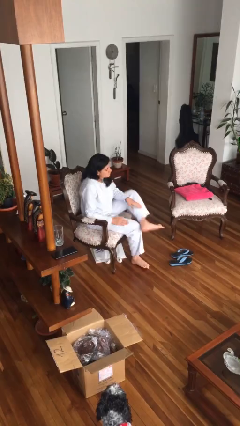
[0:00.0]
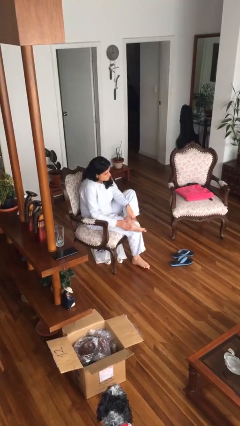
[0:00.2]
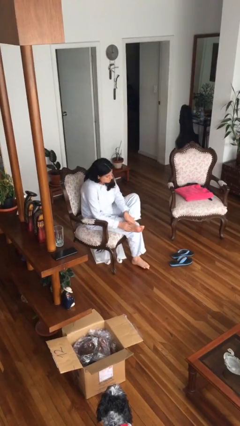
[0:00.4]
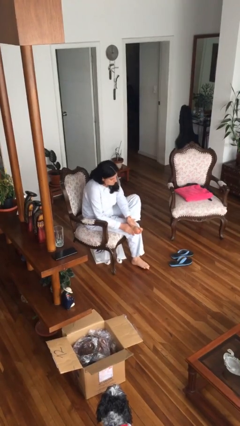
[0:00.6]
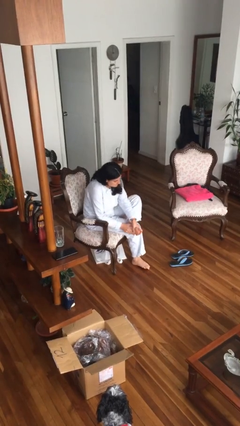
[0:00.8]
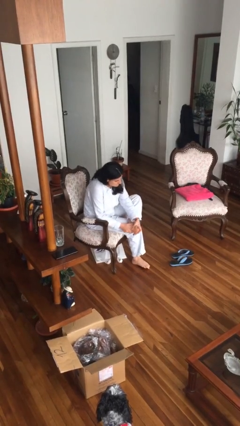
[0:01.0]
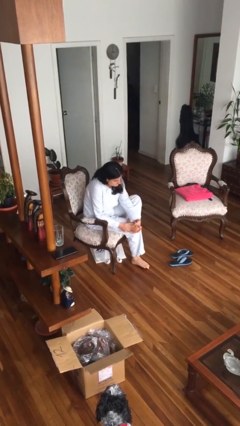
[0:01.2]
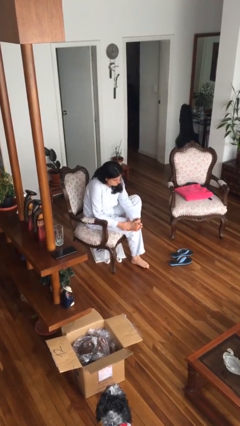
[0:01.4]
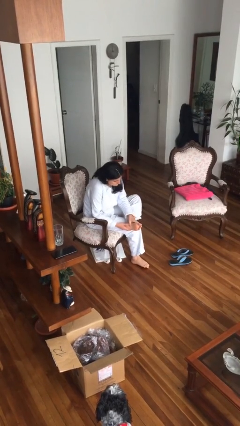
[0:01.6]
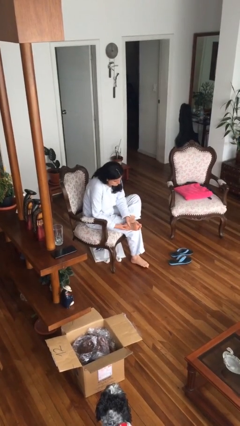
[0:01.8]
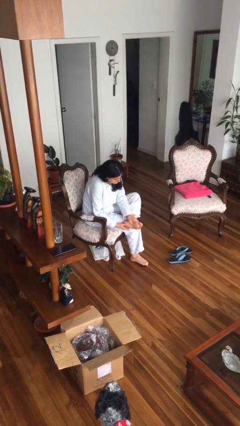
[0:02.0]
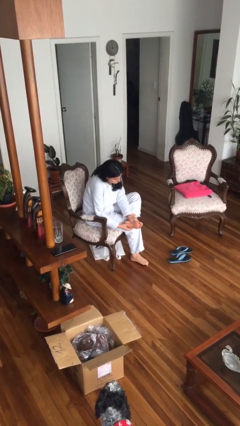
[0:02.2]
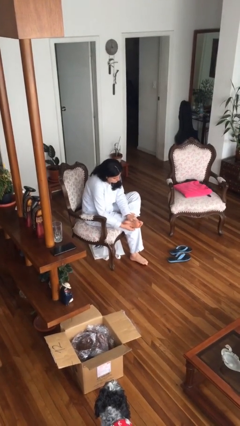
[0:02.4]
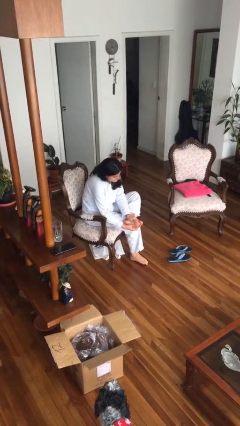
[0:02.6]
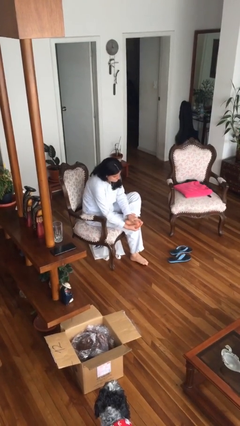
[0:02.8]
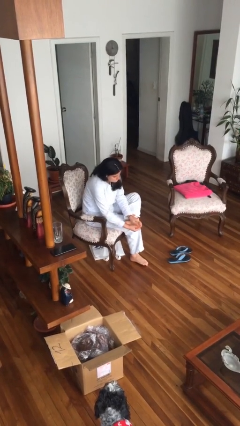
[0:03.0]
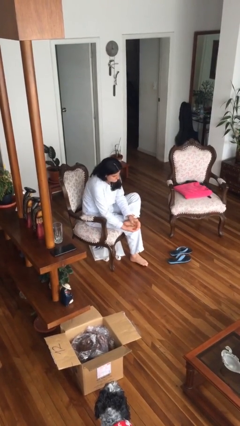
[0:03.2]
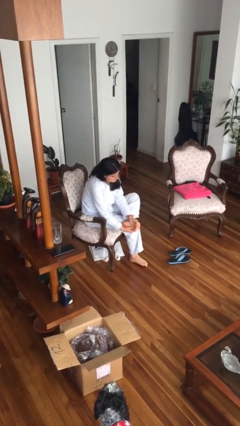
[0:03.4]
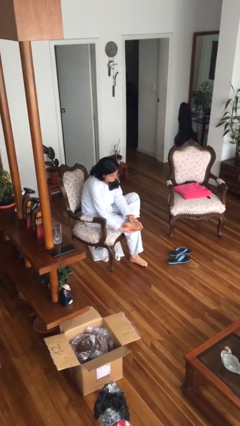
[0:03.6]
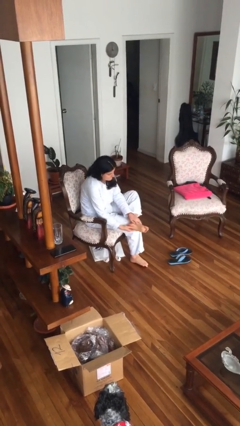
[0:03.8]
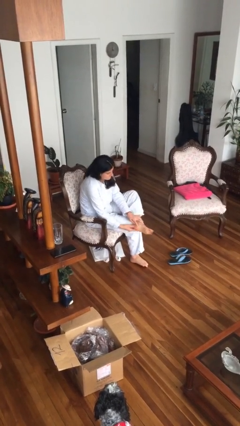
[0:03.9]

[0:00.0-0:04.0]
person rubs foot

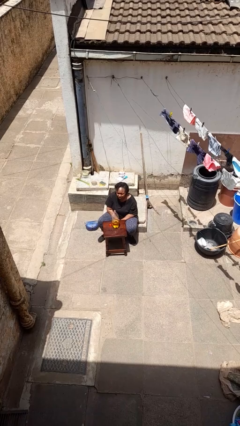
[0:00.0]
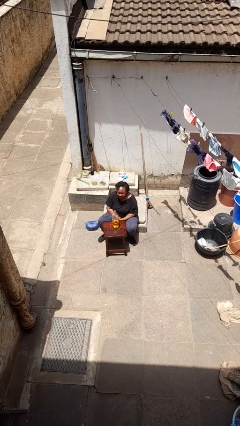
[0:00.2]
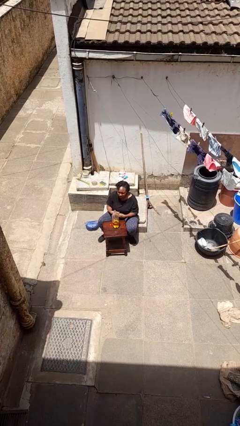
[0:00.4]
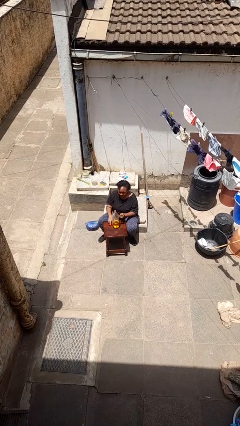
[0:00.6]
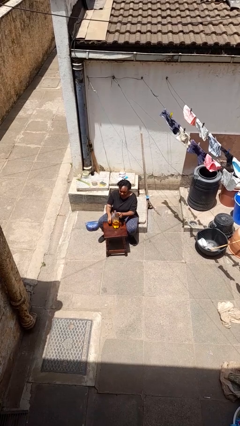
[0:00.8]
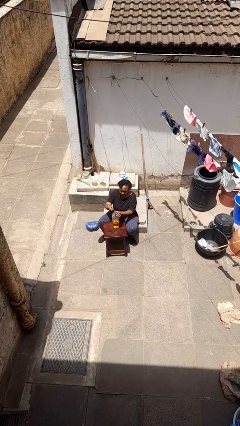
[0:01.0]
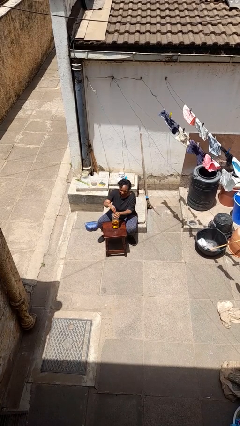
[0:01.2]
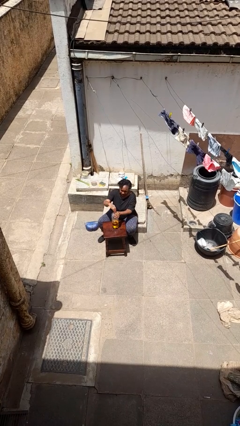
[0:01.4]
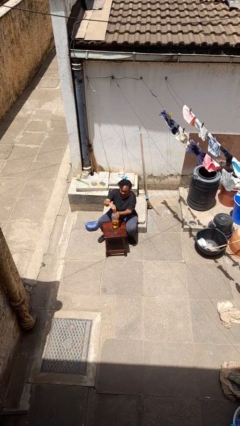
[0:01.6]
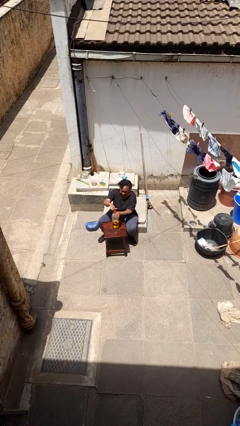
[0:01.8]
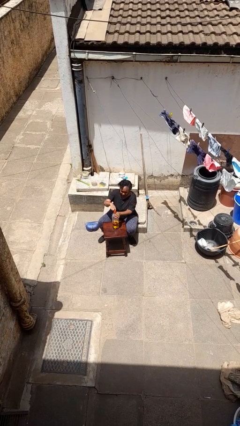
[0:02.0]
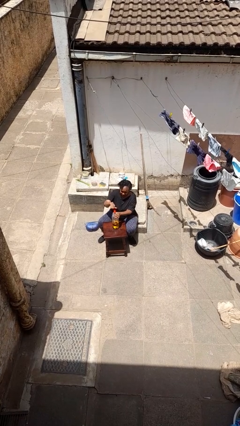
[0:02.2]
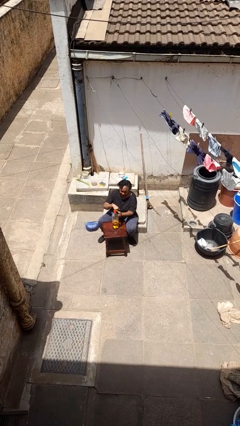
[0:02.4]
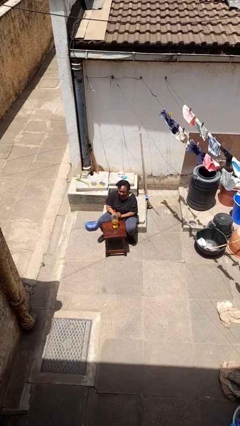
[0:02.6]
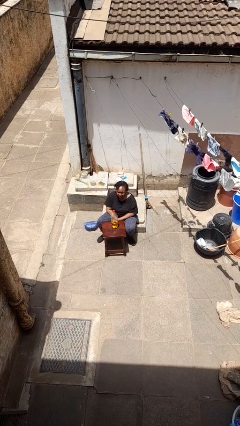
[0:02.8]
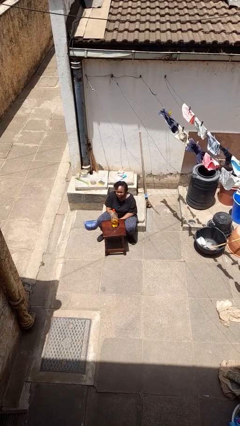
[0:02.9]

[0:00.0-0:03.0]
person screws lid to bottle

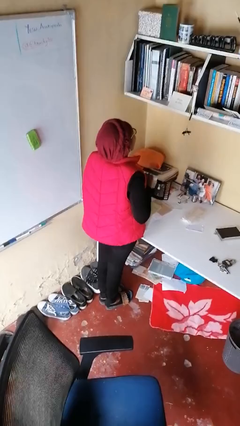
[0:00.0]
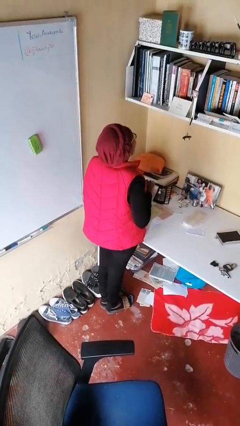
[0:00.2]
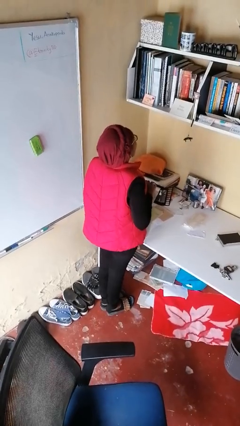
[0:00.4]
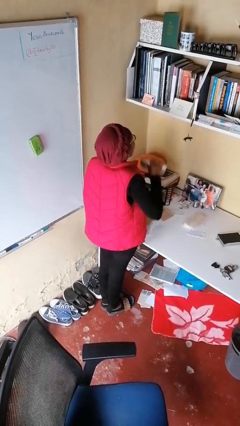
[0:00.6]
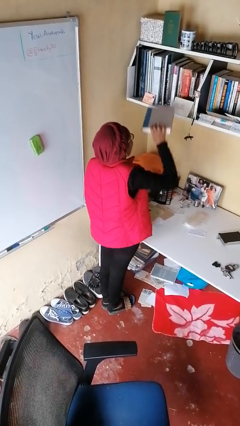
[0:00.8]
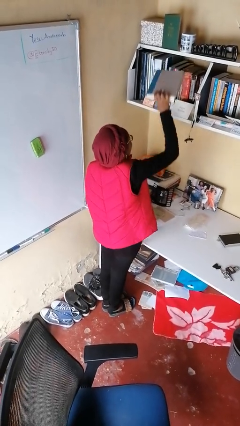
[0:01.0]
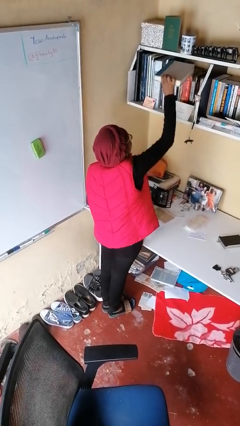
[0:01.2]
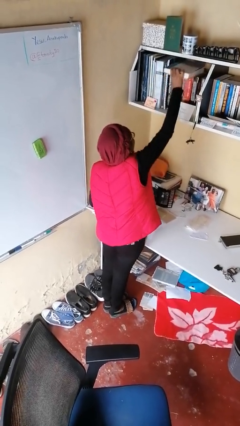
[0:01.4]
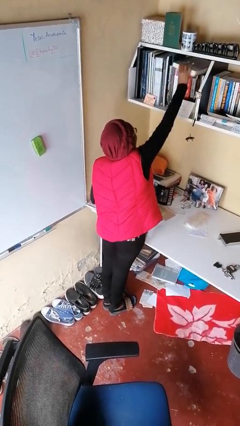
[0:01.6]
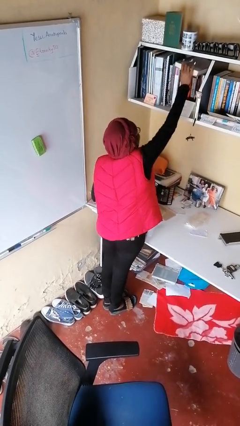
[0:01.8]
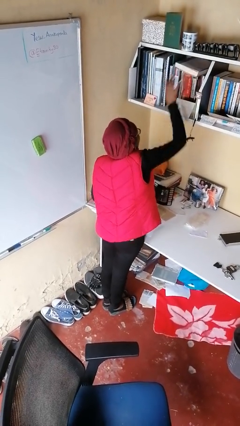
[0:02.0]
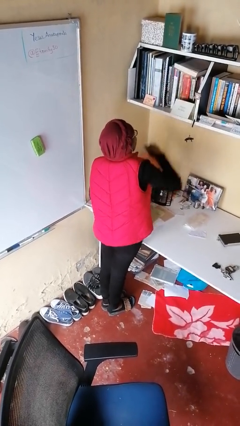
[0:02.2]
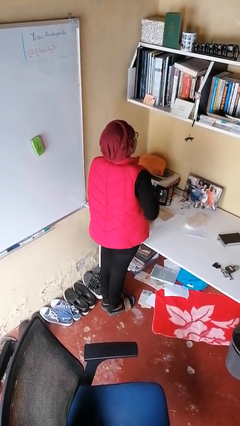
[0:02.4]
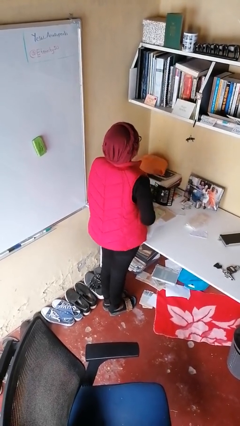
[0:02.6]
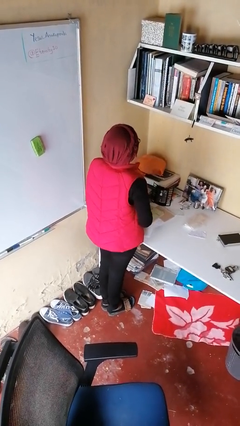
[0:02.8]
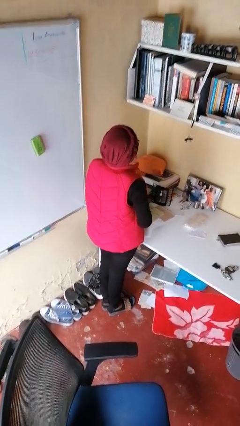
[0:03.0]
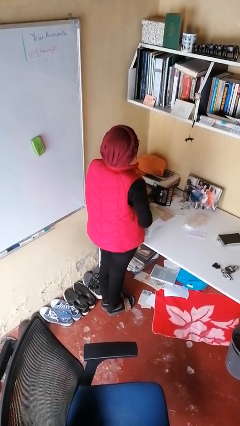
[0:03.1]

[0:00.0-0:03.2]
person puts down object on shelf

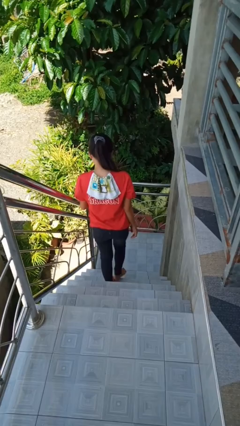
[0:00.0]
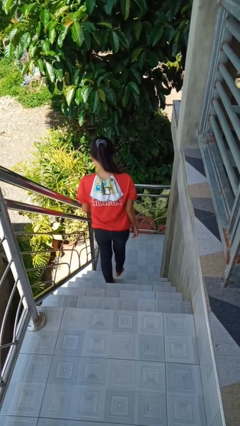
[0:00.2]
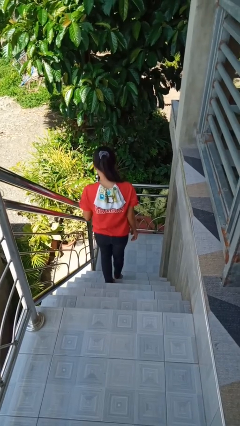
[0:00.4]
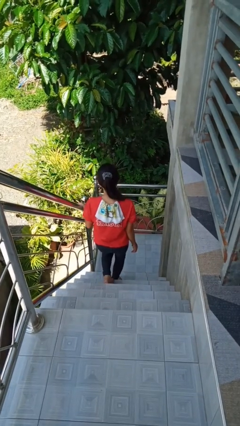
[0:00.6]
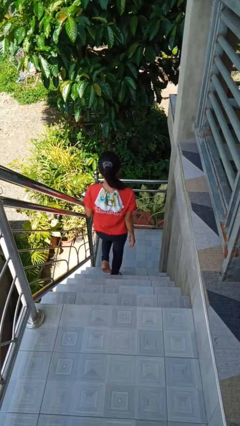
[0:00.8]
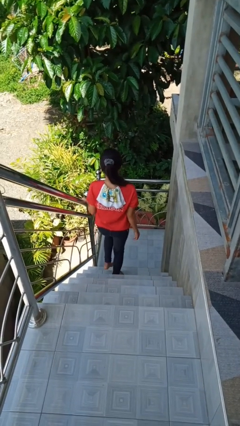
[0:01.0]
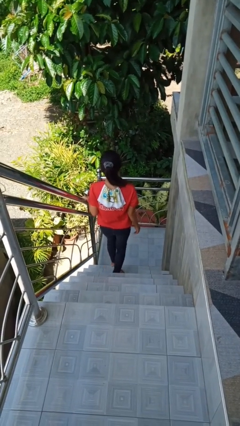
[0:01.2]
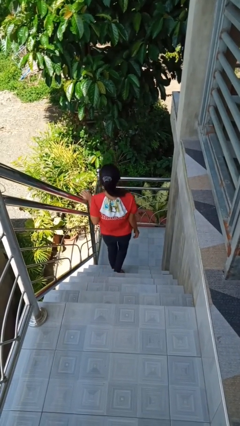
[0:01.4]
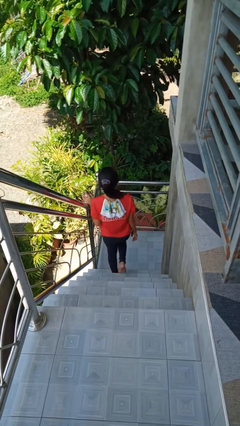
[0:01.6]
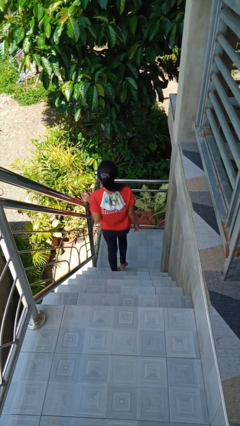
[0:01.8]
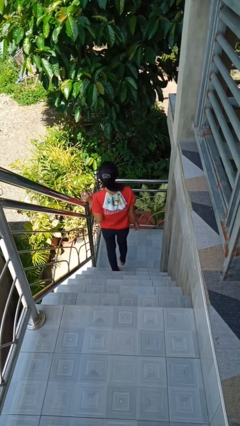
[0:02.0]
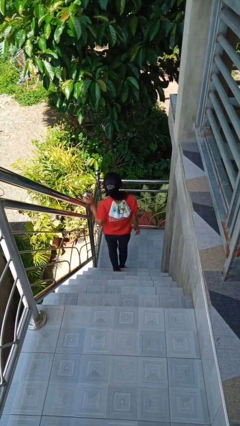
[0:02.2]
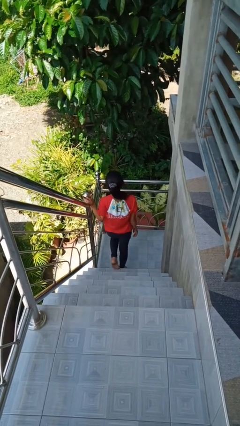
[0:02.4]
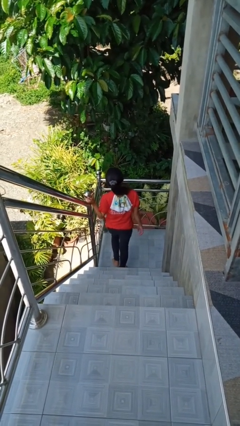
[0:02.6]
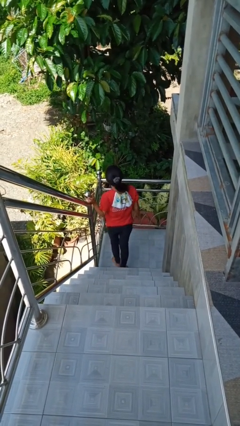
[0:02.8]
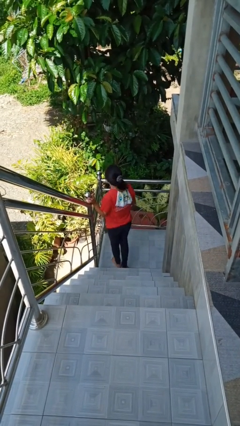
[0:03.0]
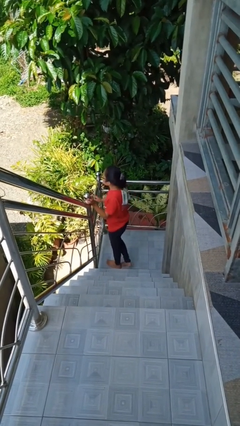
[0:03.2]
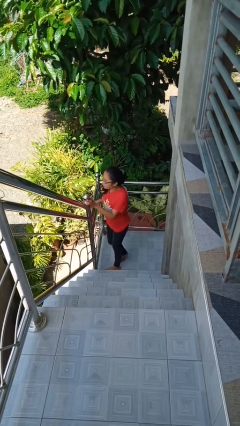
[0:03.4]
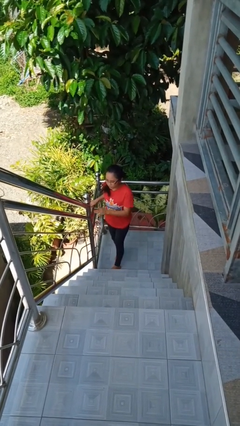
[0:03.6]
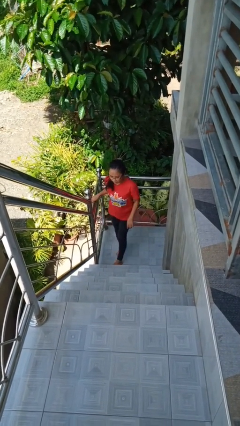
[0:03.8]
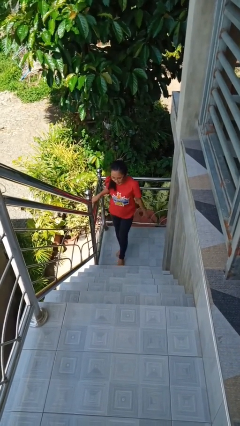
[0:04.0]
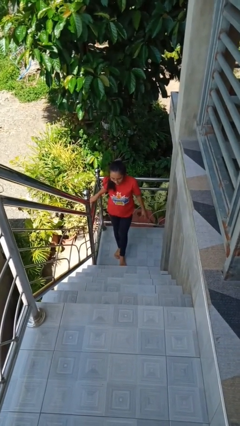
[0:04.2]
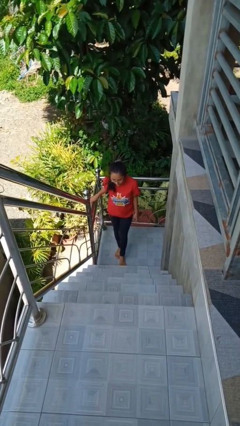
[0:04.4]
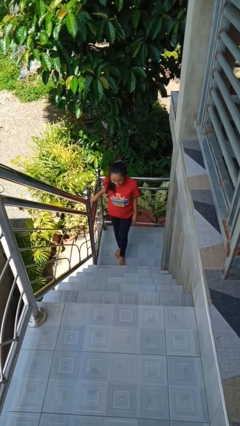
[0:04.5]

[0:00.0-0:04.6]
person climbs down stairs

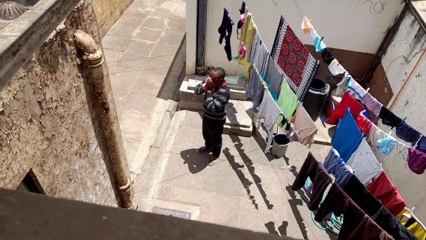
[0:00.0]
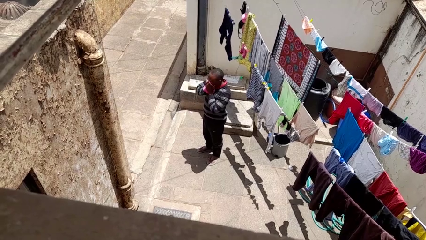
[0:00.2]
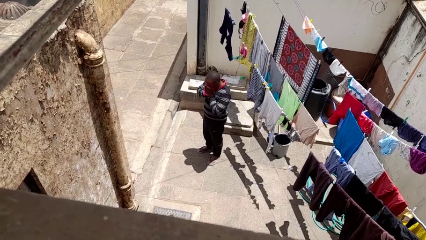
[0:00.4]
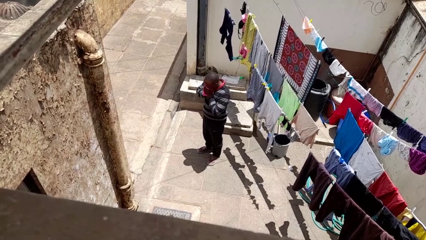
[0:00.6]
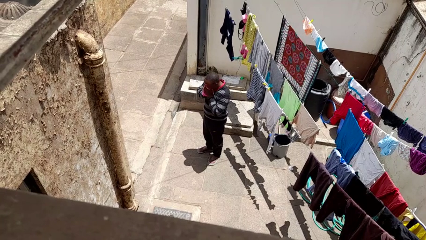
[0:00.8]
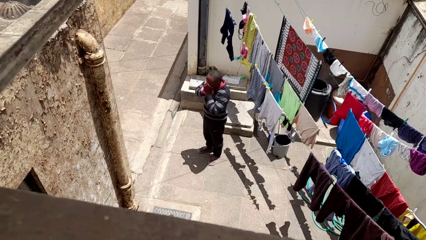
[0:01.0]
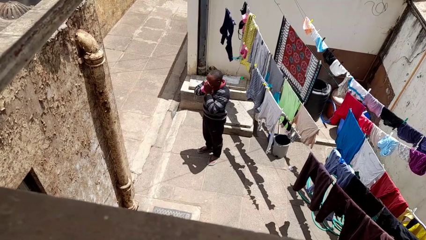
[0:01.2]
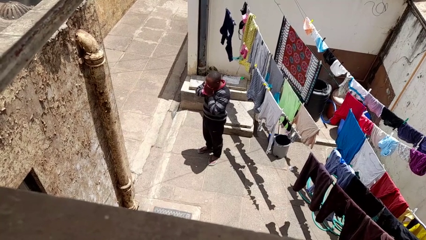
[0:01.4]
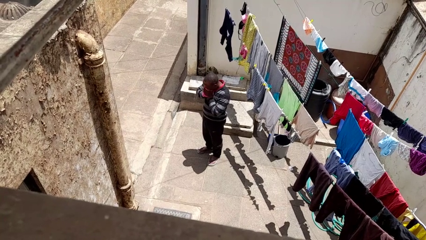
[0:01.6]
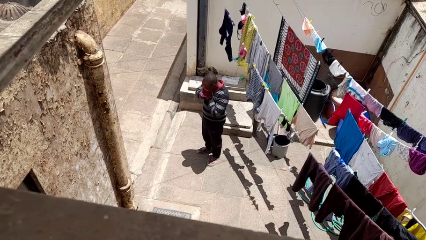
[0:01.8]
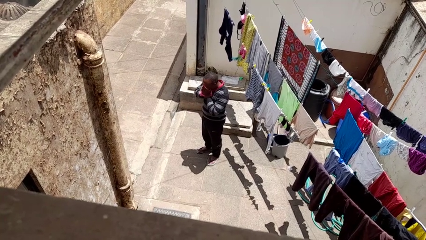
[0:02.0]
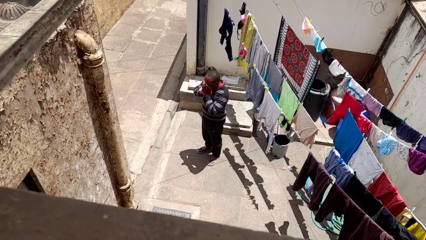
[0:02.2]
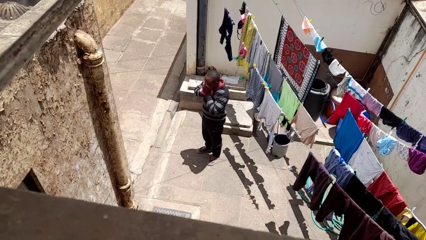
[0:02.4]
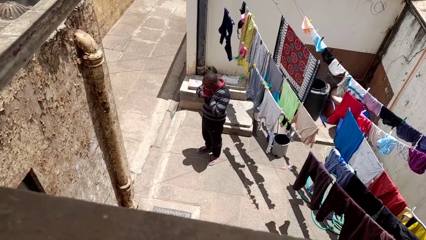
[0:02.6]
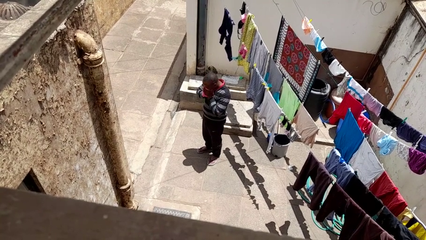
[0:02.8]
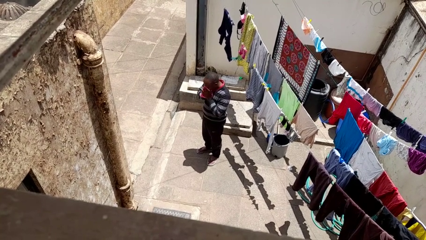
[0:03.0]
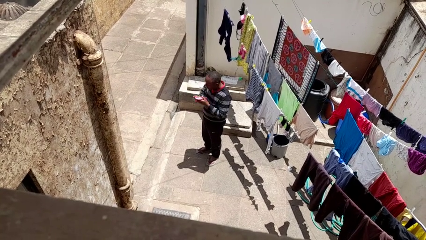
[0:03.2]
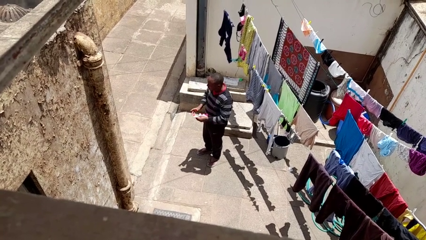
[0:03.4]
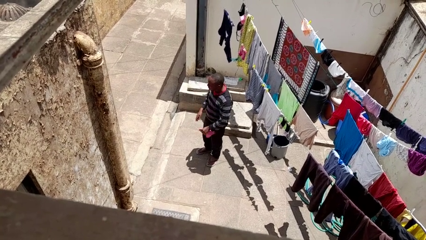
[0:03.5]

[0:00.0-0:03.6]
person blows nose
